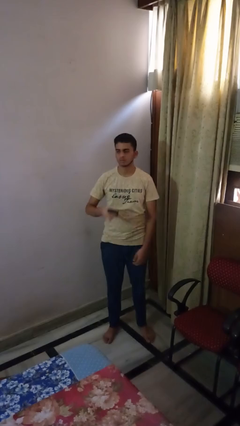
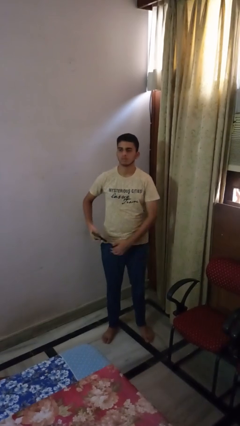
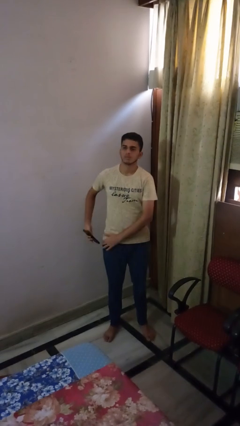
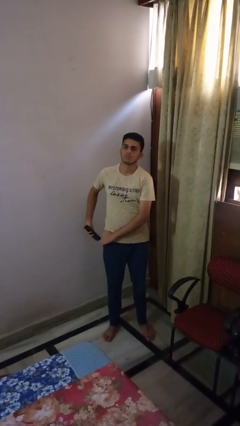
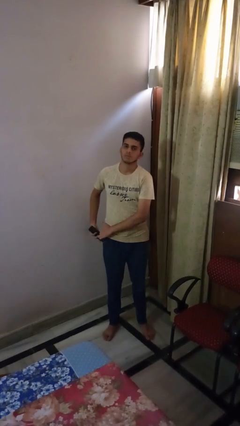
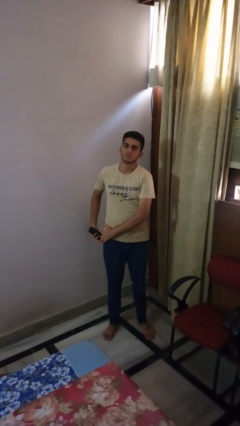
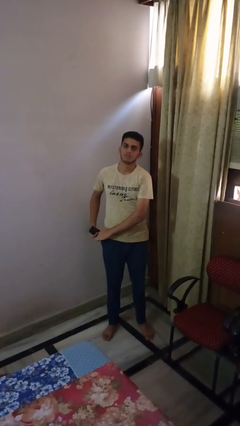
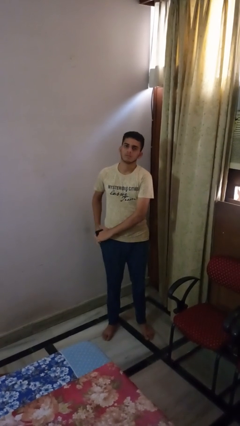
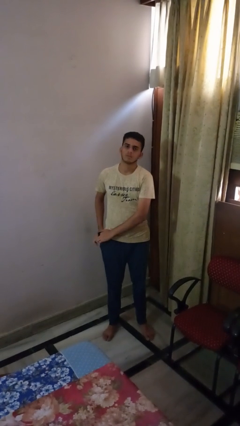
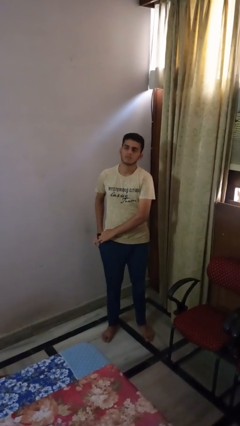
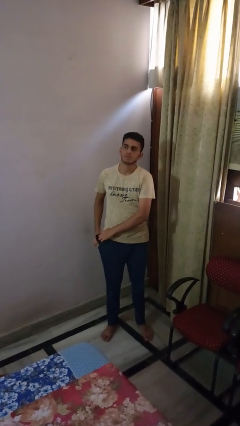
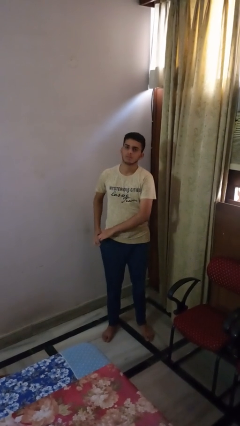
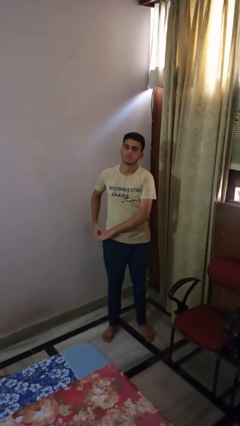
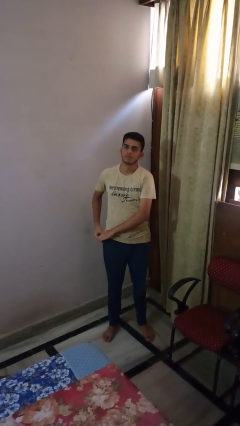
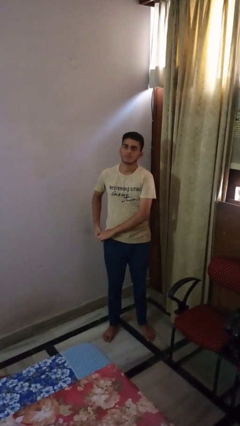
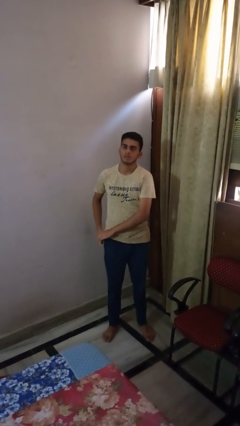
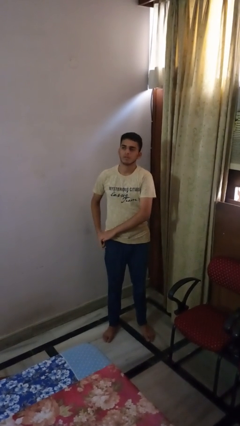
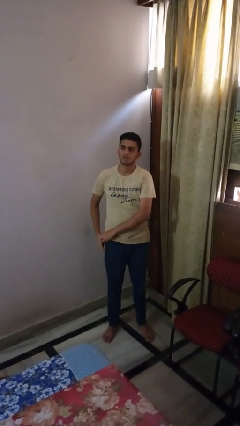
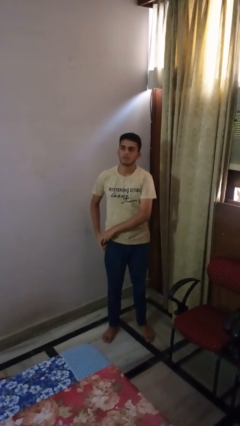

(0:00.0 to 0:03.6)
person puts phone into pocket

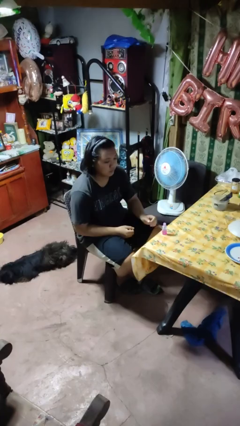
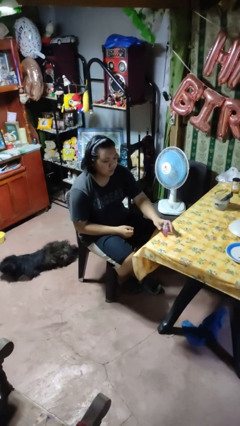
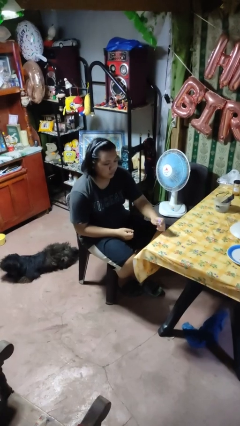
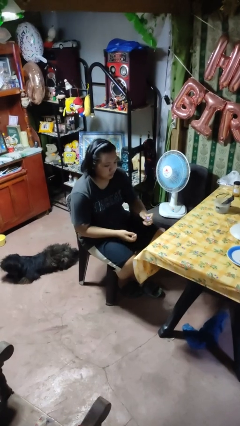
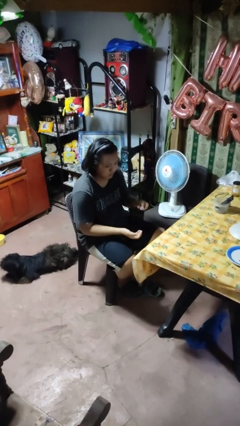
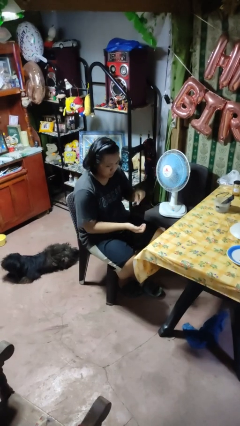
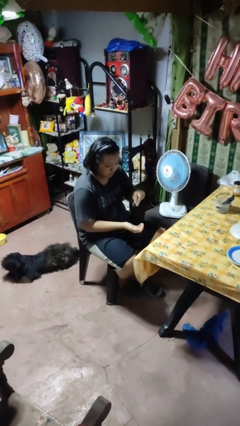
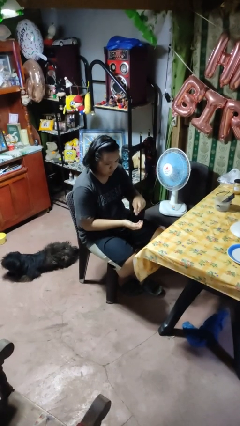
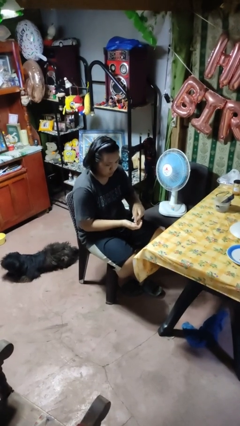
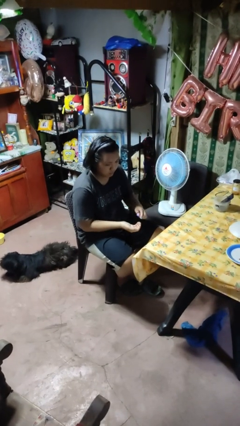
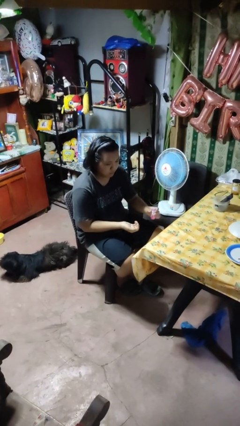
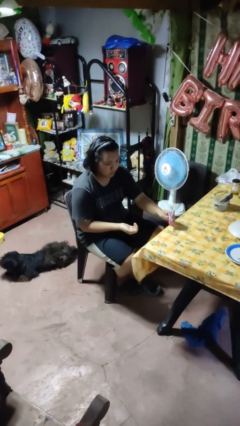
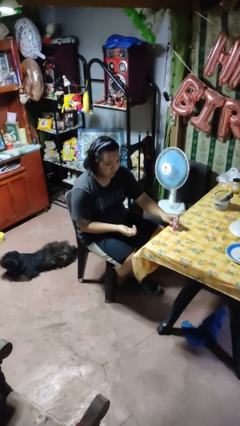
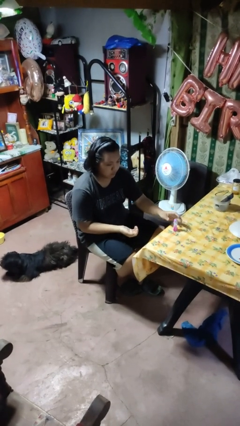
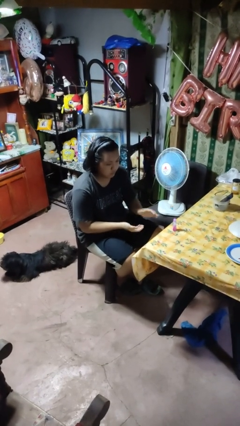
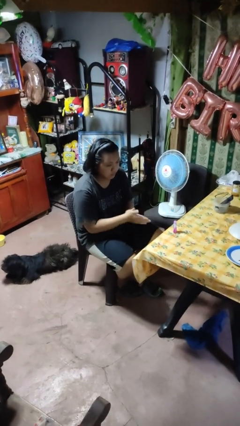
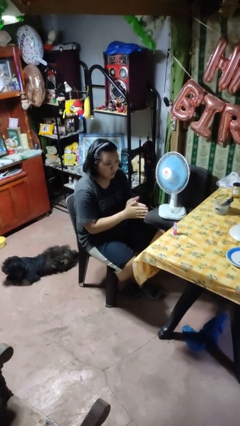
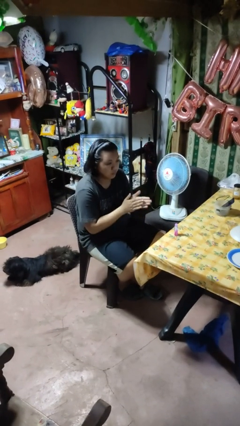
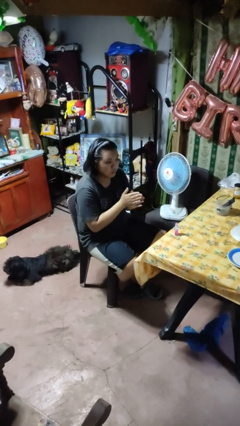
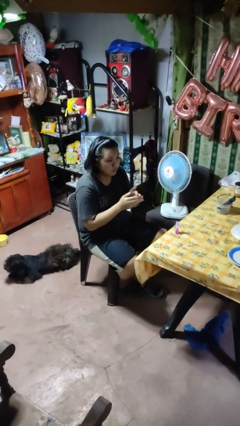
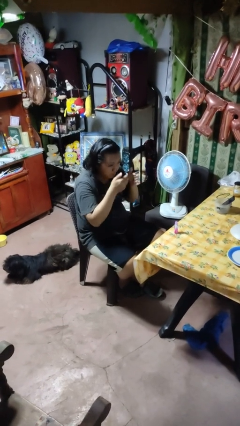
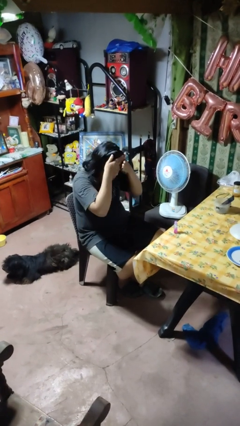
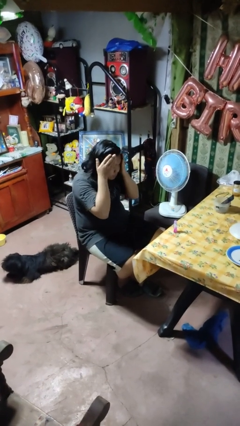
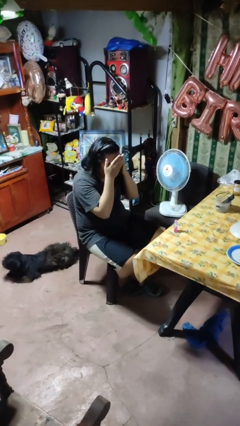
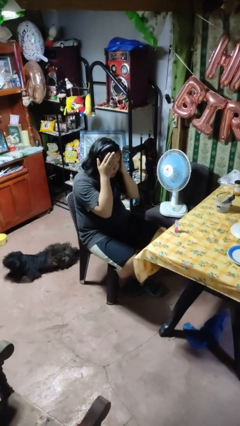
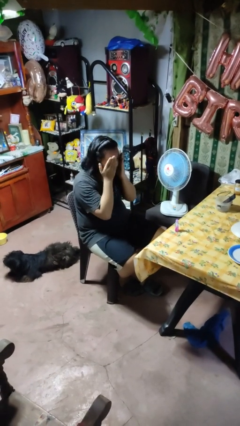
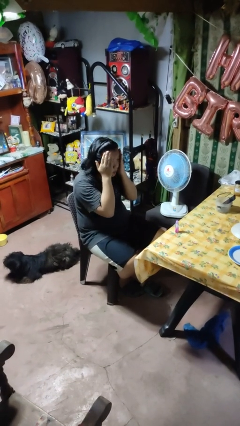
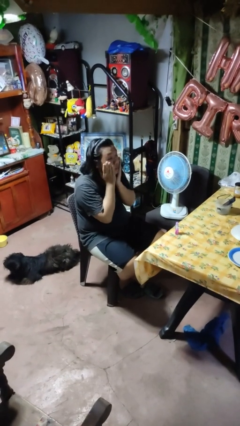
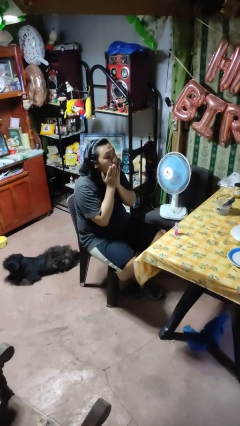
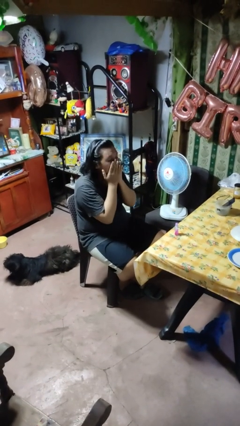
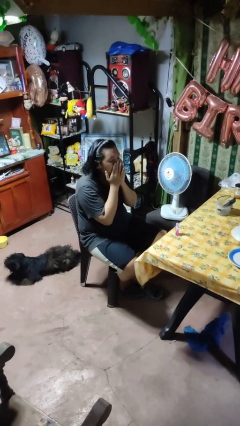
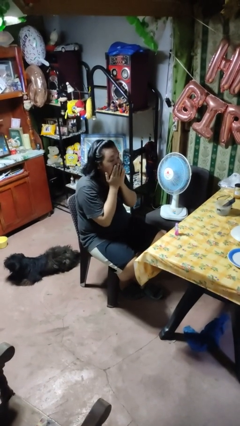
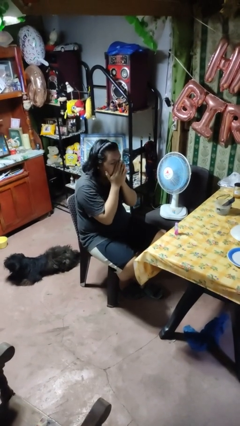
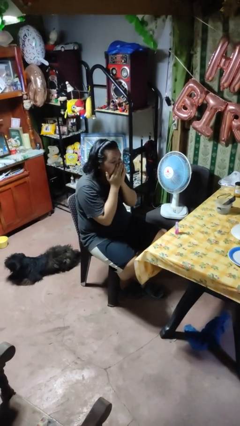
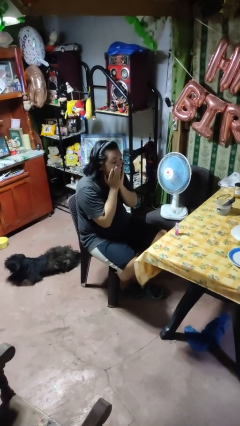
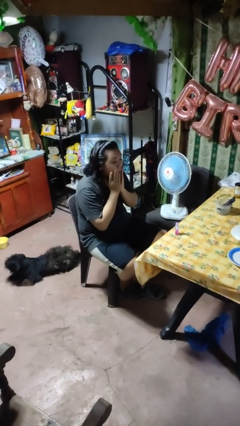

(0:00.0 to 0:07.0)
person applies facial moisturizer

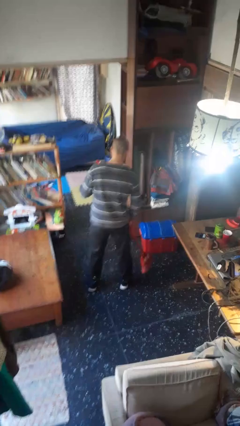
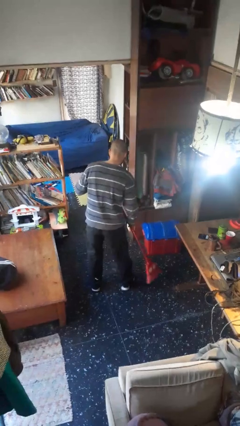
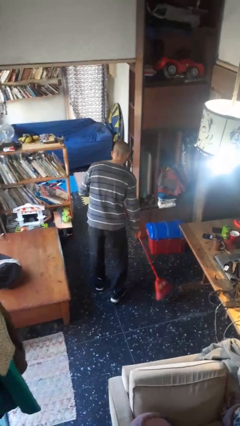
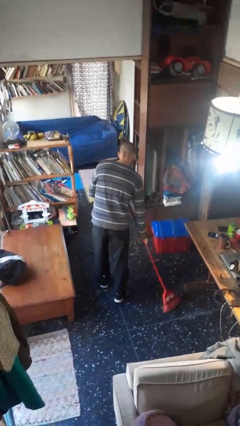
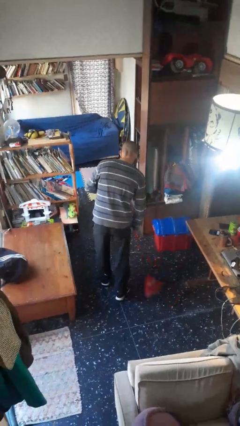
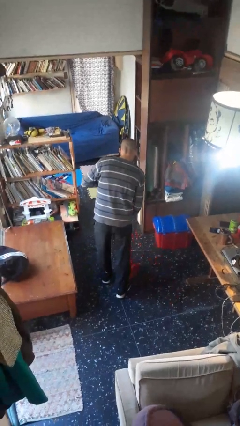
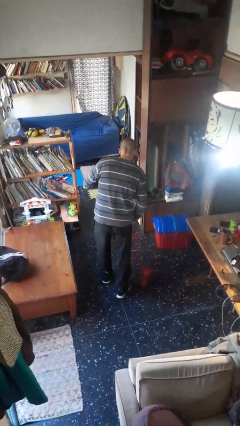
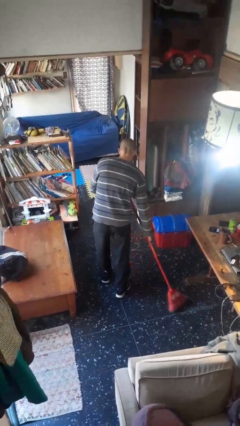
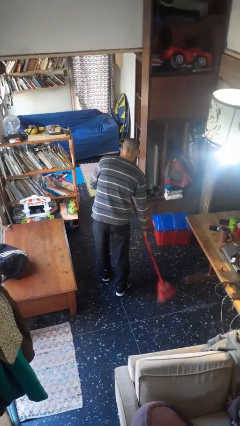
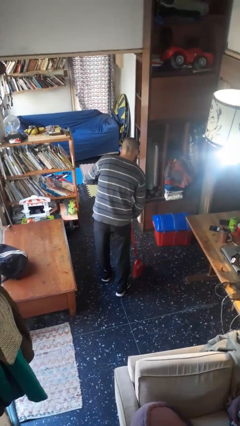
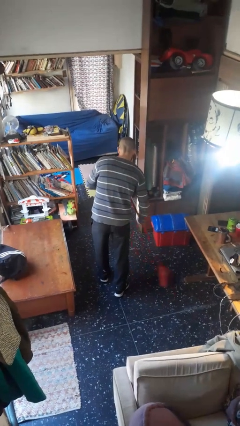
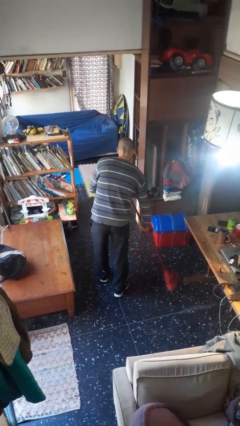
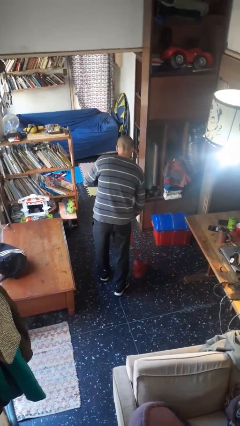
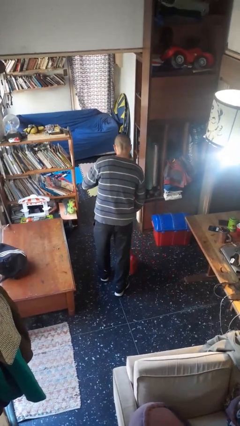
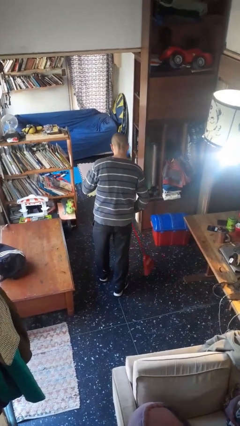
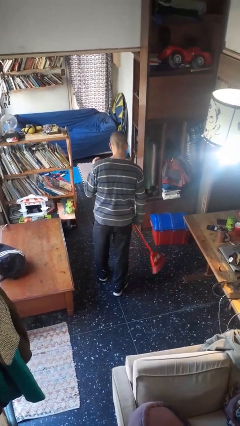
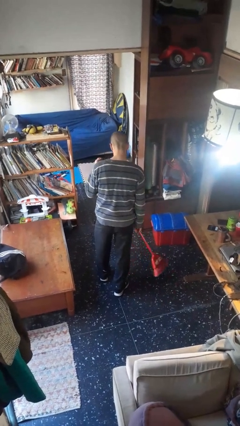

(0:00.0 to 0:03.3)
person sweeps floor

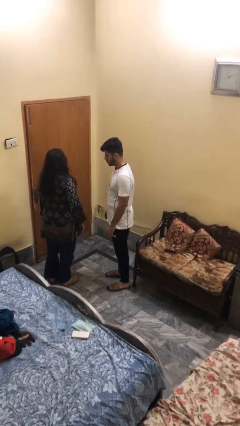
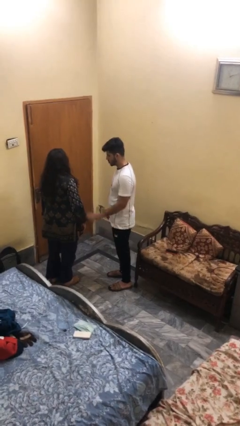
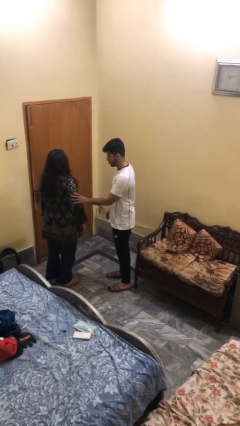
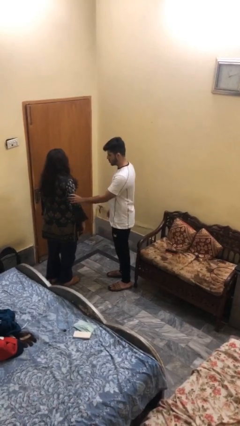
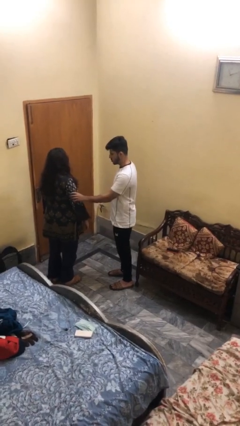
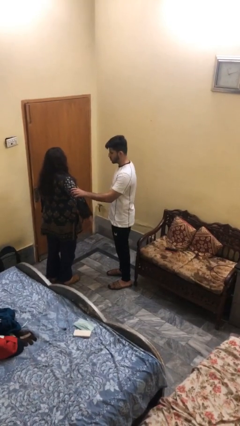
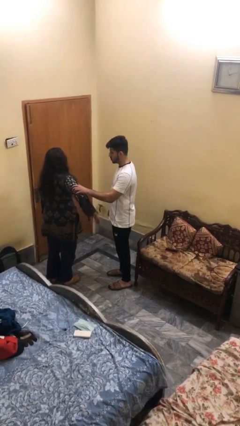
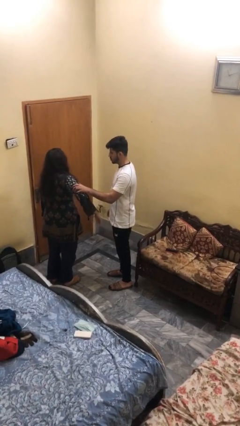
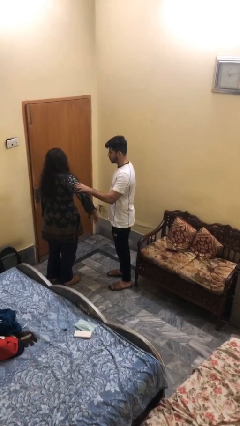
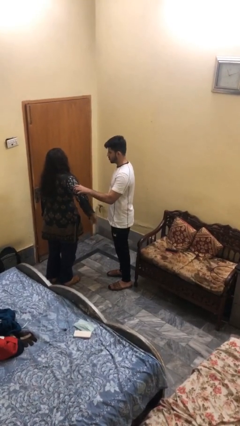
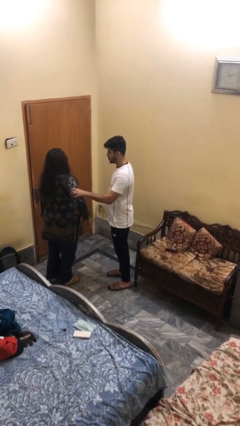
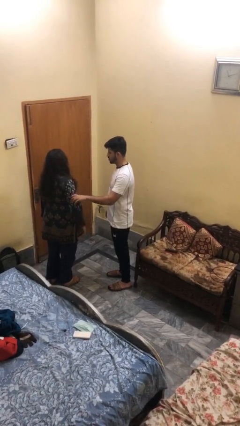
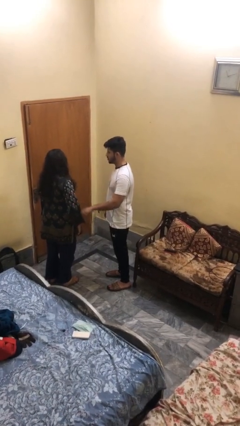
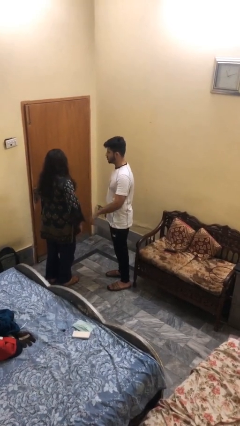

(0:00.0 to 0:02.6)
person grabs person by bicep

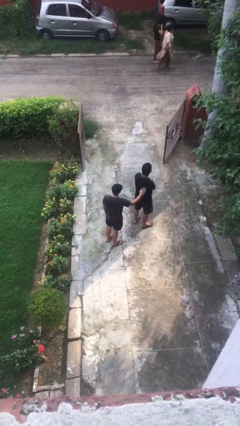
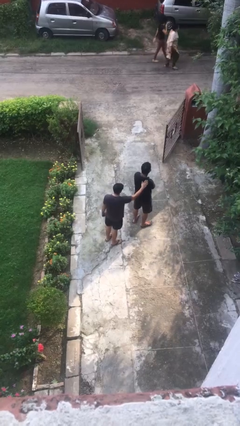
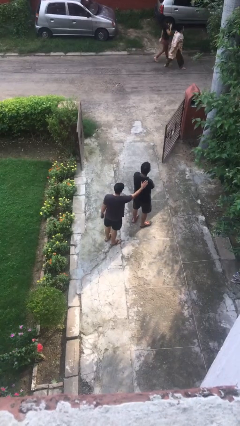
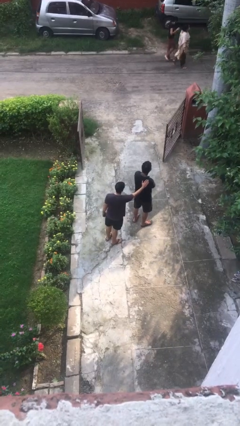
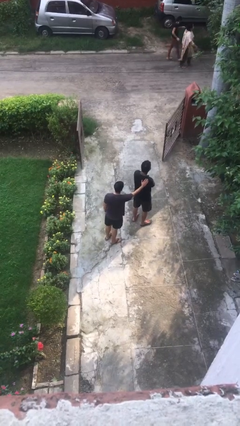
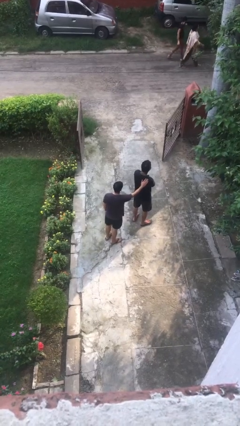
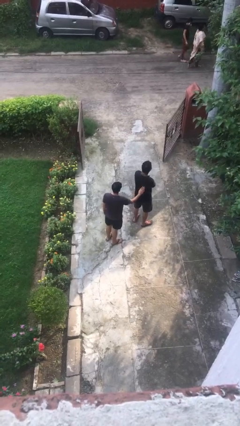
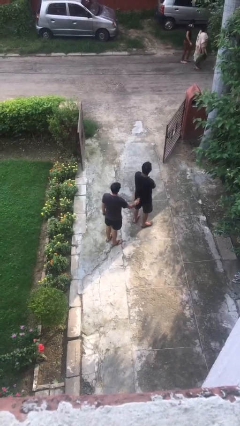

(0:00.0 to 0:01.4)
person touches back of person

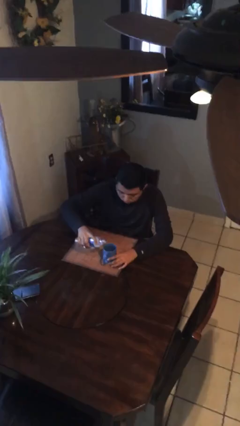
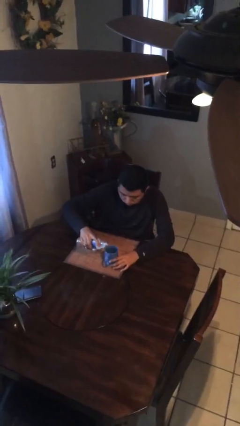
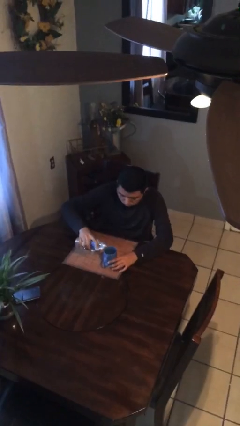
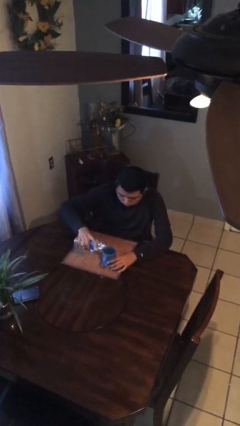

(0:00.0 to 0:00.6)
person pours liquid into cup
